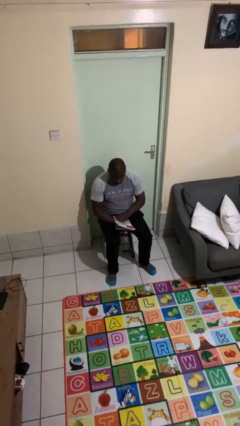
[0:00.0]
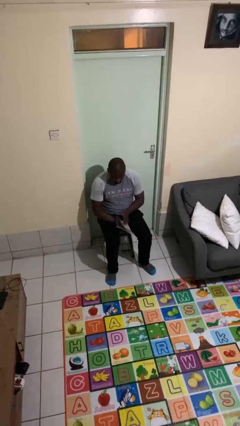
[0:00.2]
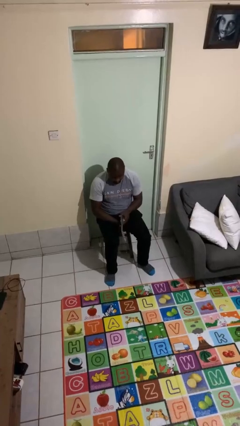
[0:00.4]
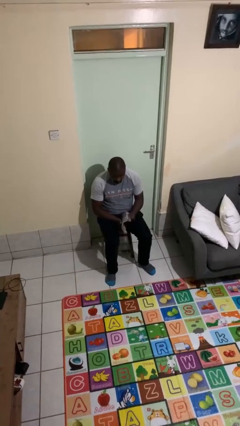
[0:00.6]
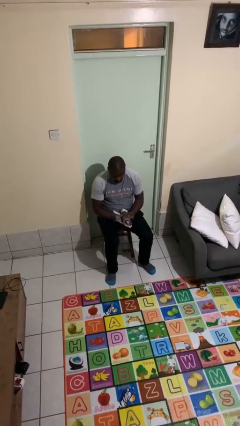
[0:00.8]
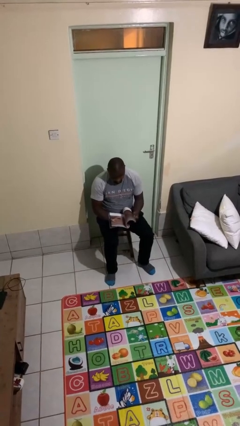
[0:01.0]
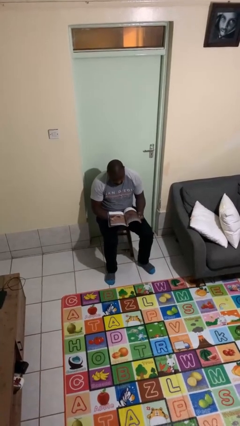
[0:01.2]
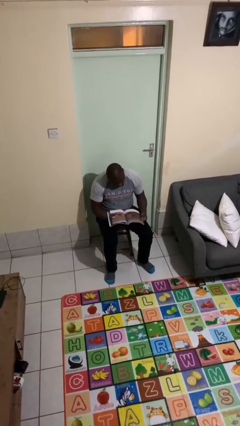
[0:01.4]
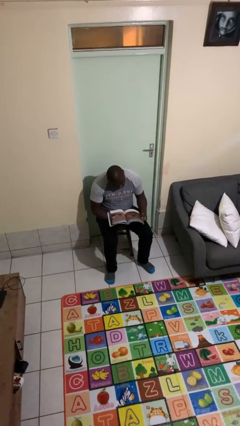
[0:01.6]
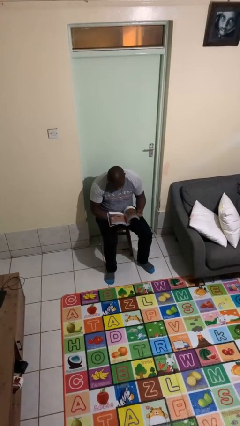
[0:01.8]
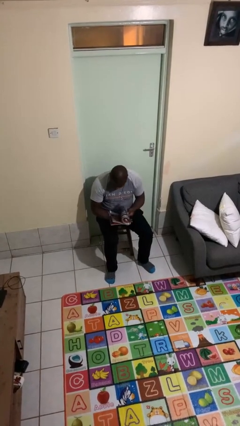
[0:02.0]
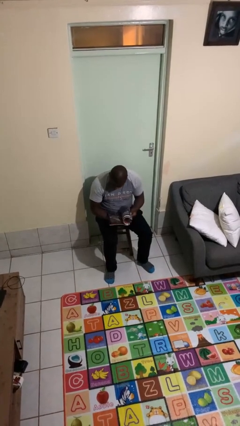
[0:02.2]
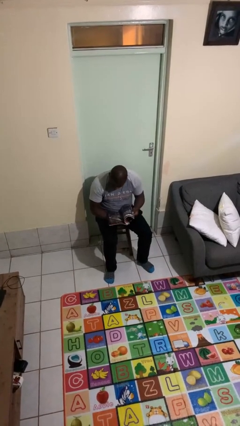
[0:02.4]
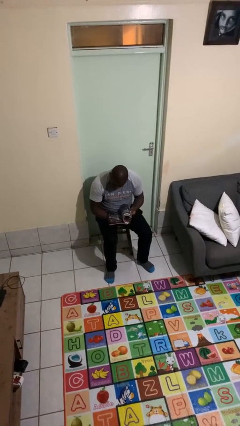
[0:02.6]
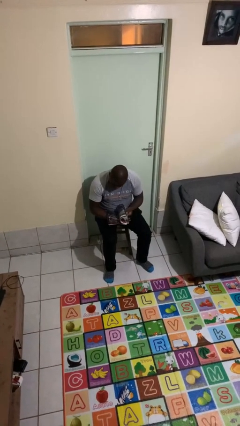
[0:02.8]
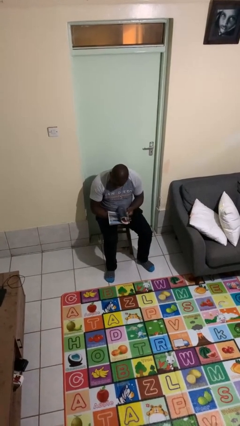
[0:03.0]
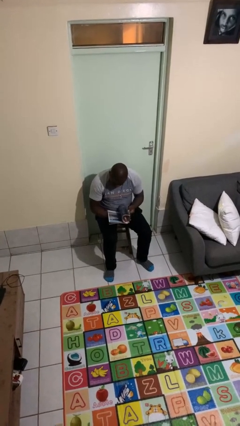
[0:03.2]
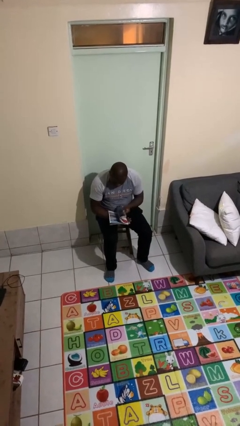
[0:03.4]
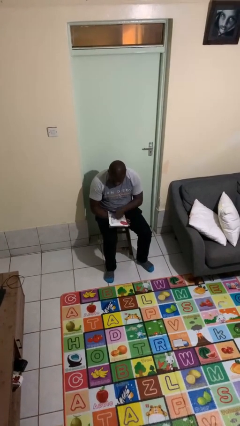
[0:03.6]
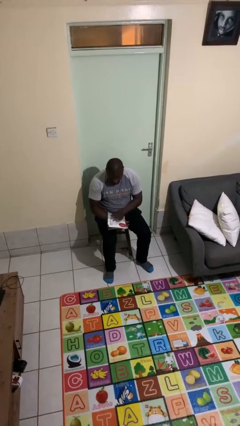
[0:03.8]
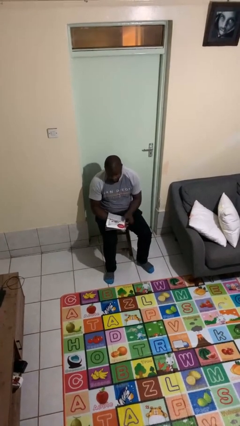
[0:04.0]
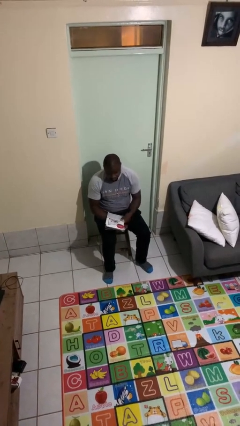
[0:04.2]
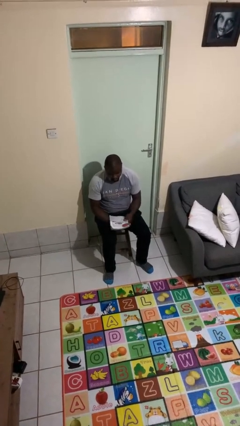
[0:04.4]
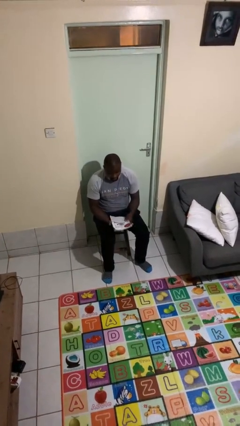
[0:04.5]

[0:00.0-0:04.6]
person reads magazine

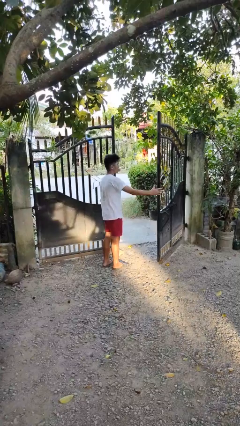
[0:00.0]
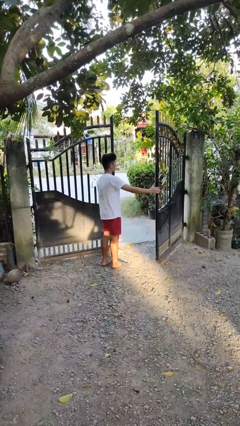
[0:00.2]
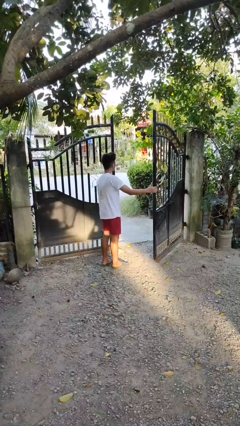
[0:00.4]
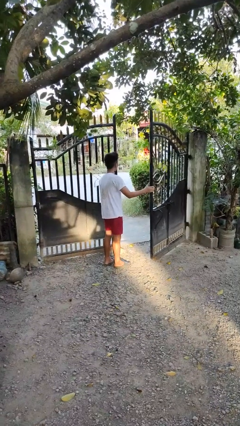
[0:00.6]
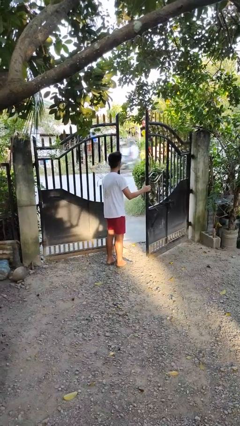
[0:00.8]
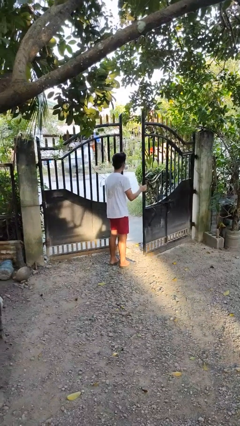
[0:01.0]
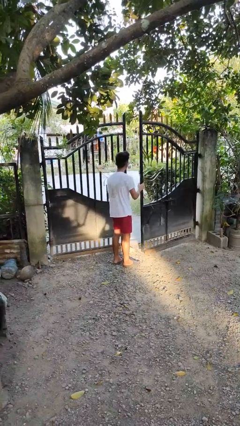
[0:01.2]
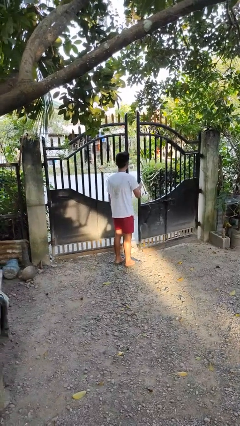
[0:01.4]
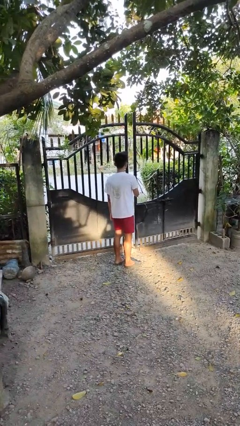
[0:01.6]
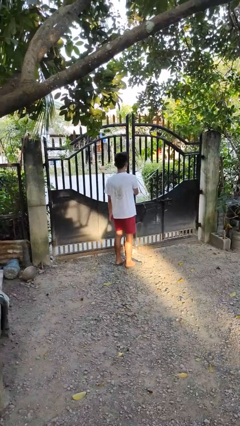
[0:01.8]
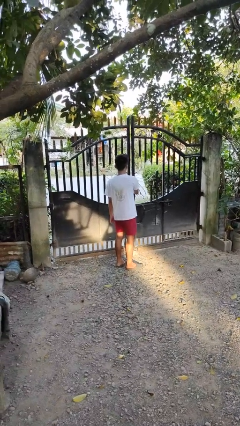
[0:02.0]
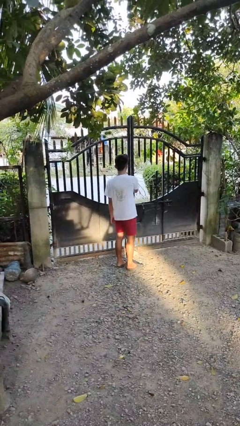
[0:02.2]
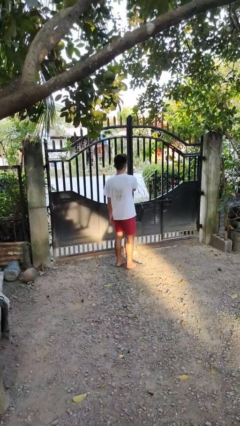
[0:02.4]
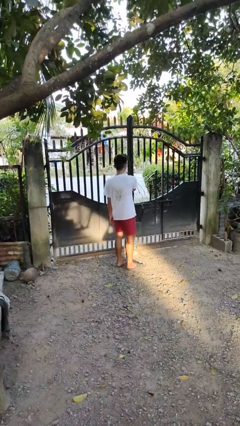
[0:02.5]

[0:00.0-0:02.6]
person closes gate

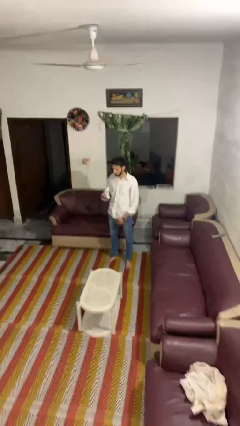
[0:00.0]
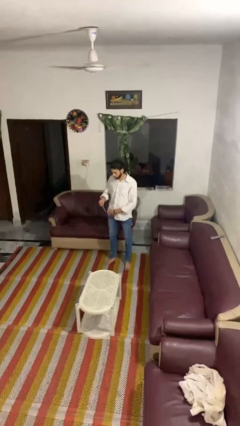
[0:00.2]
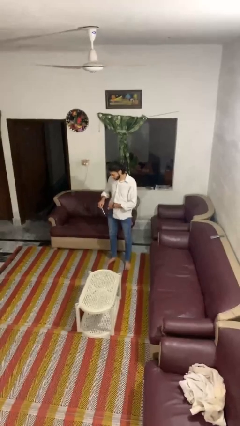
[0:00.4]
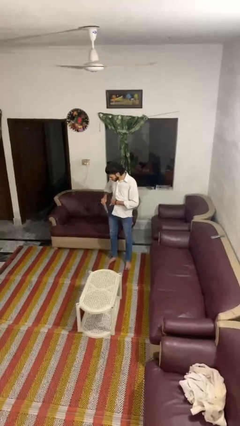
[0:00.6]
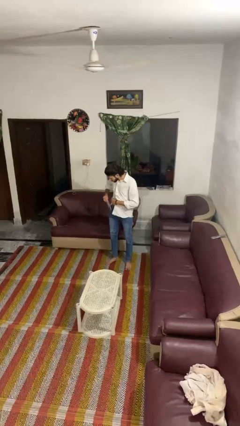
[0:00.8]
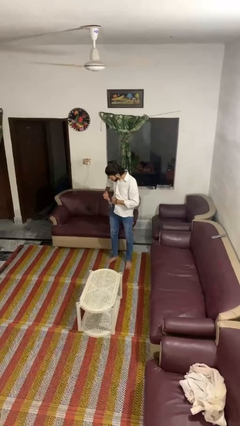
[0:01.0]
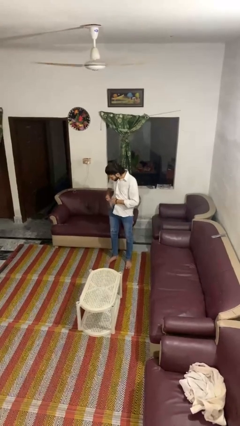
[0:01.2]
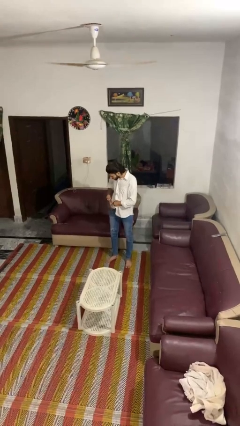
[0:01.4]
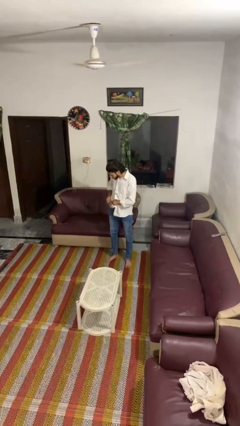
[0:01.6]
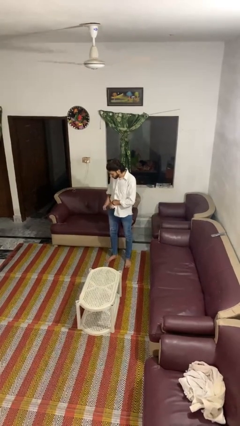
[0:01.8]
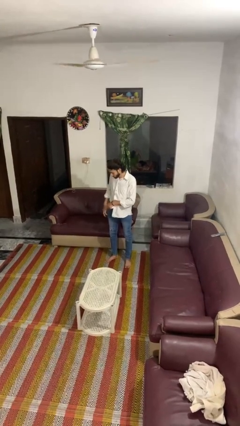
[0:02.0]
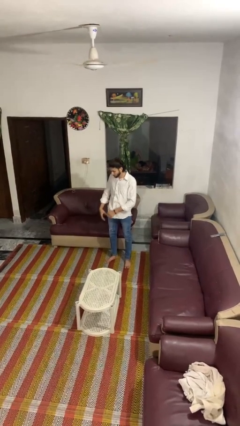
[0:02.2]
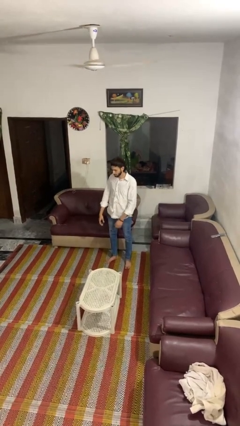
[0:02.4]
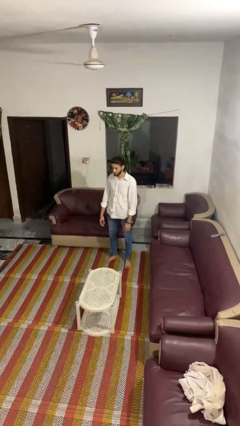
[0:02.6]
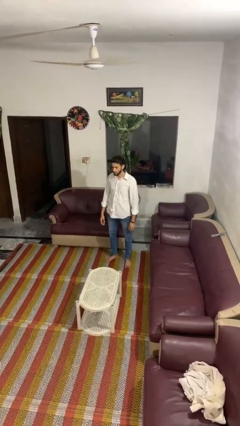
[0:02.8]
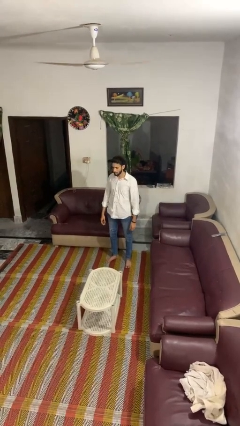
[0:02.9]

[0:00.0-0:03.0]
person puts phone into pocket

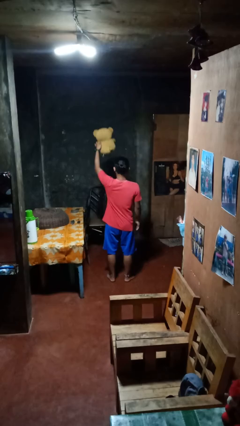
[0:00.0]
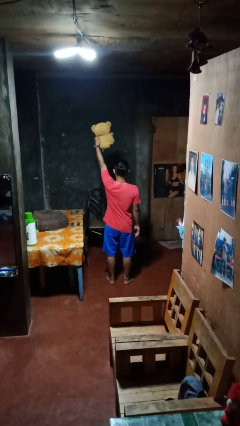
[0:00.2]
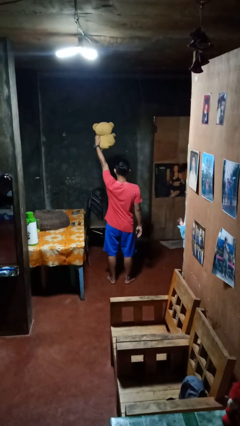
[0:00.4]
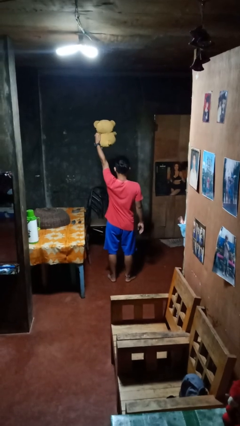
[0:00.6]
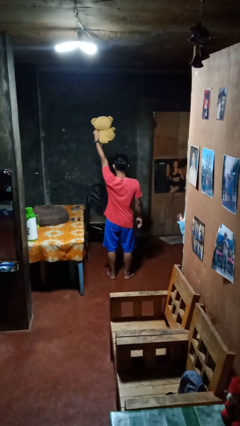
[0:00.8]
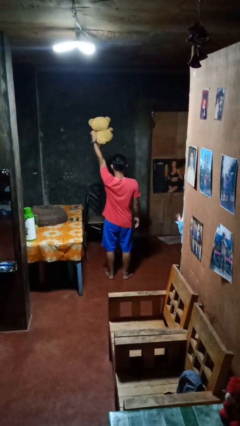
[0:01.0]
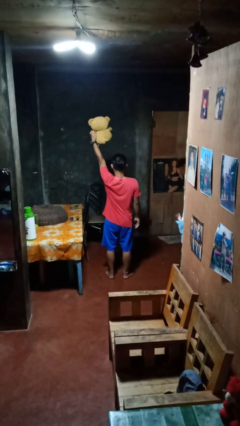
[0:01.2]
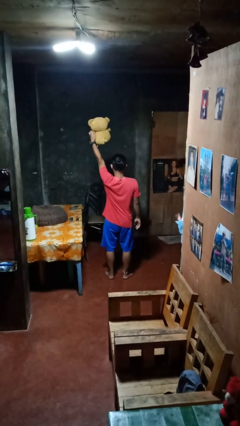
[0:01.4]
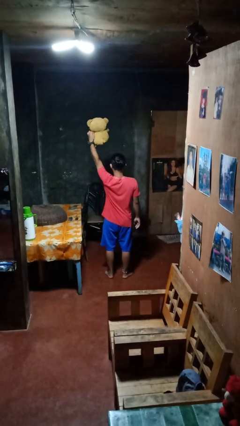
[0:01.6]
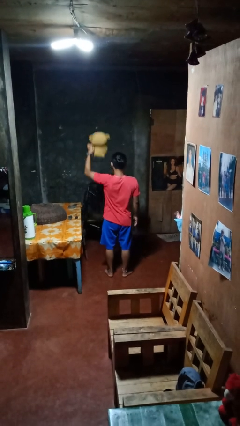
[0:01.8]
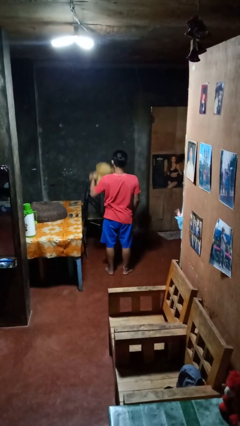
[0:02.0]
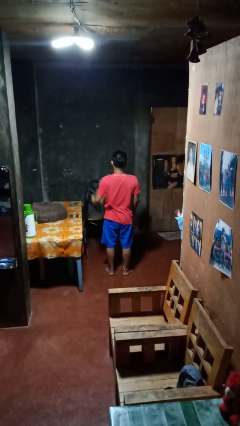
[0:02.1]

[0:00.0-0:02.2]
person holds object above head

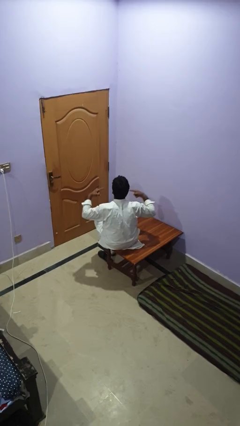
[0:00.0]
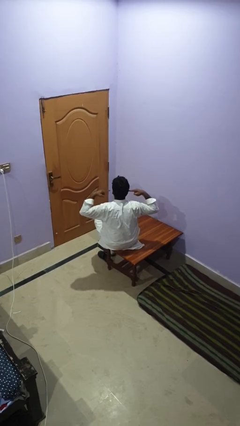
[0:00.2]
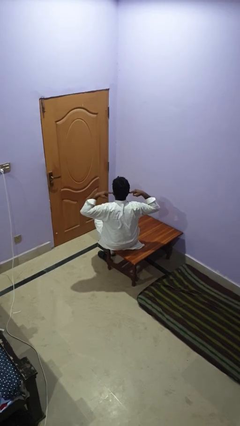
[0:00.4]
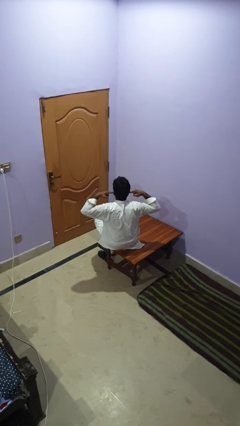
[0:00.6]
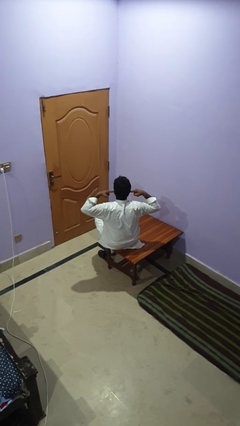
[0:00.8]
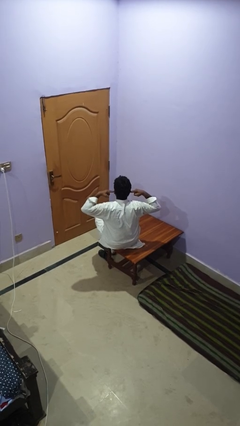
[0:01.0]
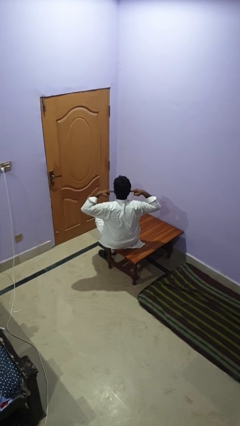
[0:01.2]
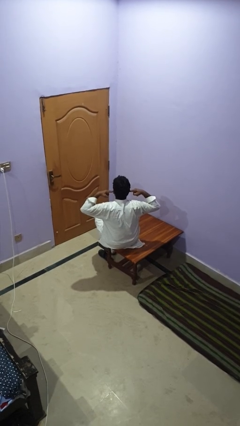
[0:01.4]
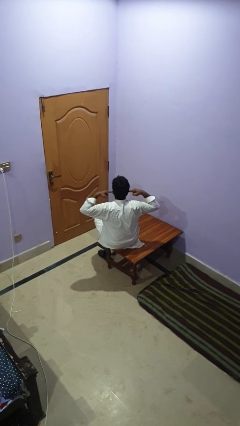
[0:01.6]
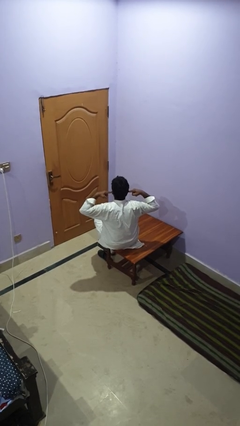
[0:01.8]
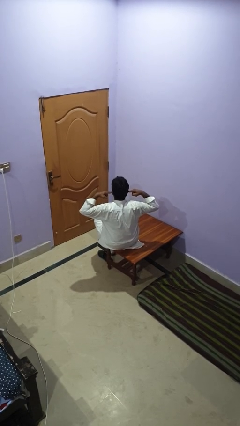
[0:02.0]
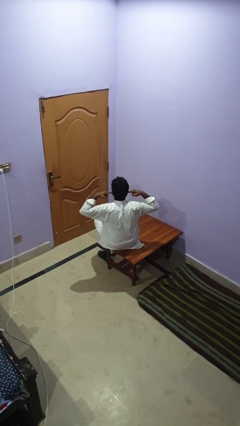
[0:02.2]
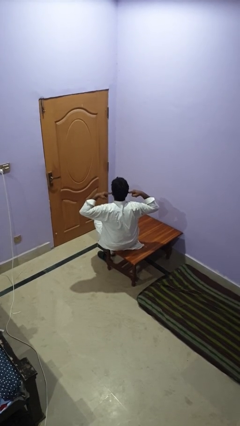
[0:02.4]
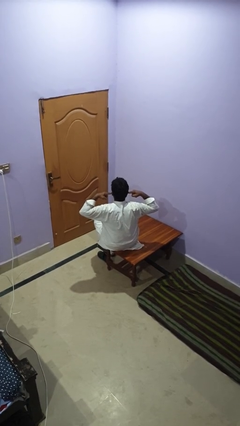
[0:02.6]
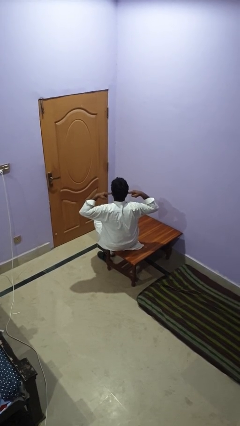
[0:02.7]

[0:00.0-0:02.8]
person puts fingers in ear

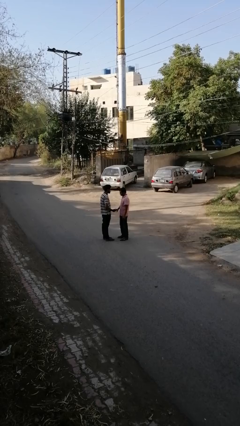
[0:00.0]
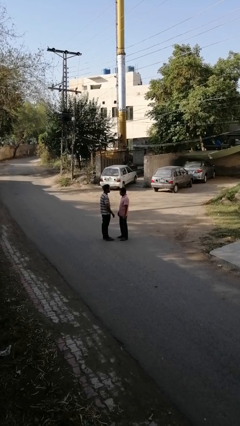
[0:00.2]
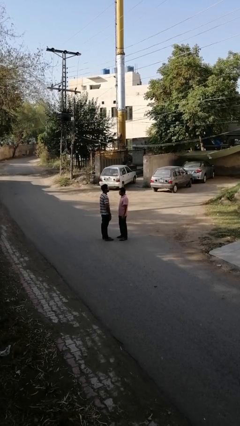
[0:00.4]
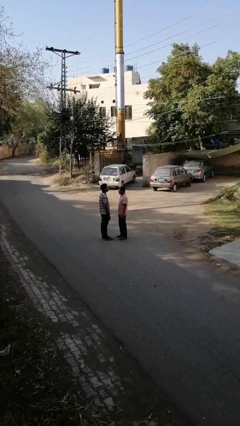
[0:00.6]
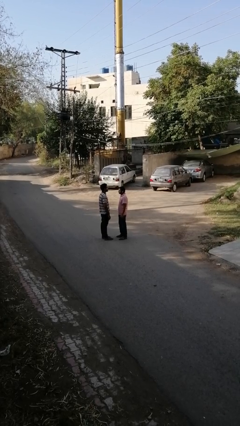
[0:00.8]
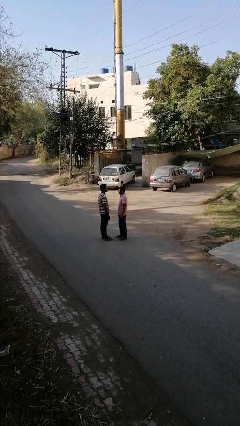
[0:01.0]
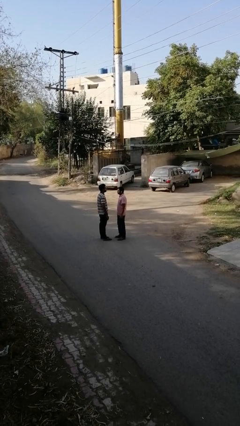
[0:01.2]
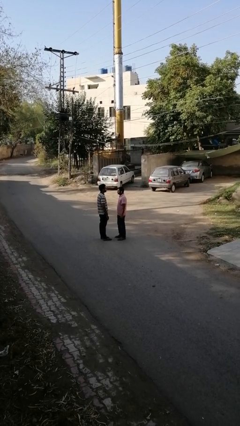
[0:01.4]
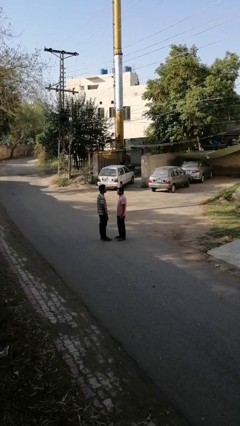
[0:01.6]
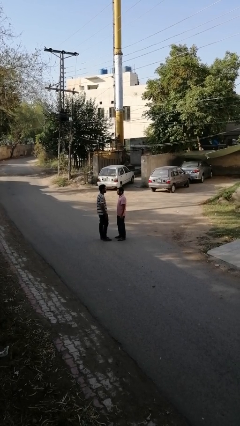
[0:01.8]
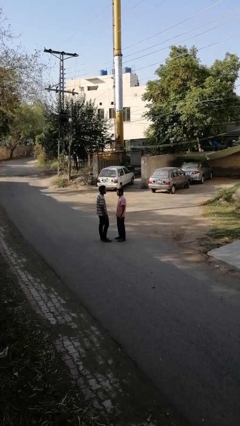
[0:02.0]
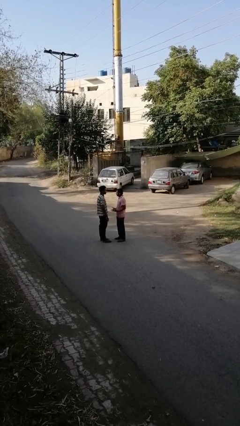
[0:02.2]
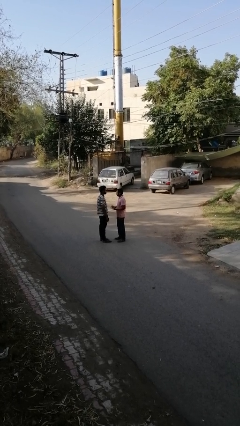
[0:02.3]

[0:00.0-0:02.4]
person highfives hand
